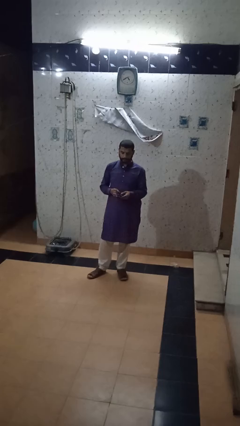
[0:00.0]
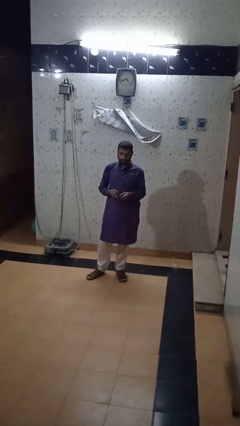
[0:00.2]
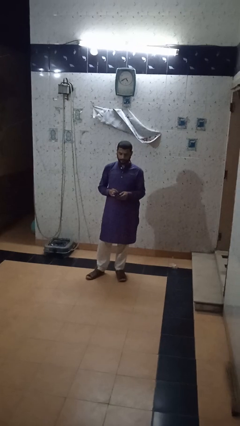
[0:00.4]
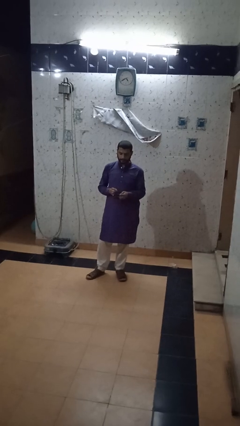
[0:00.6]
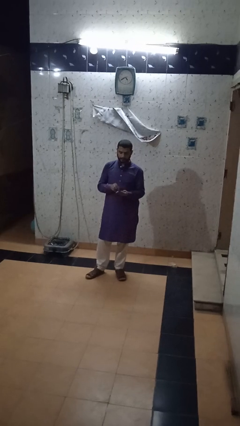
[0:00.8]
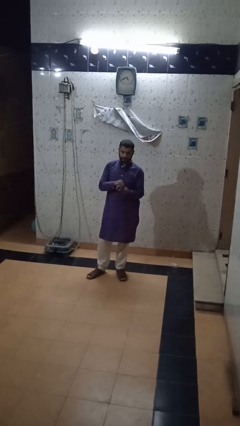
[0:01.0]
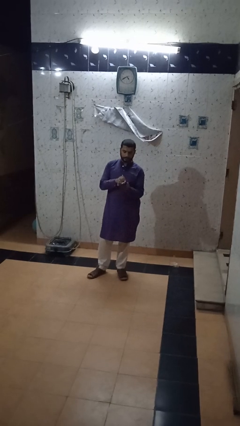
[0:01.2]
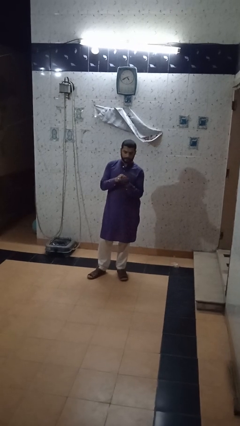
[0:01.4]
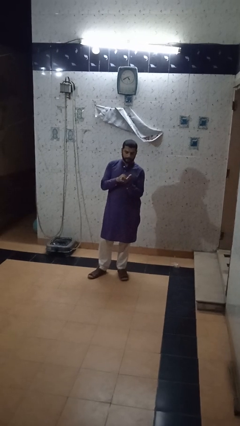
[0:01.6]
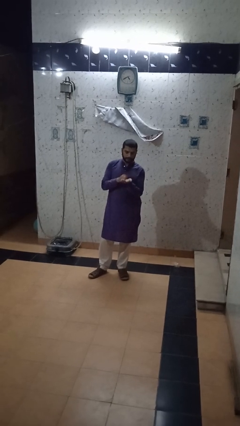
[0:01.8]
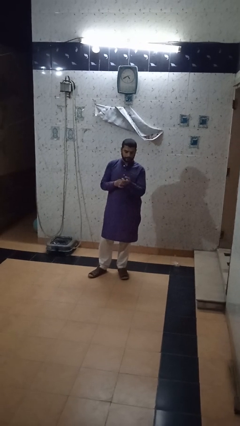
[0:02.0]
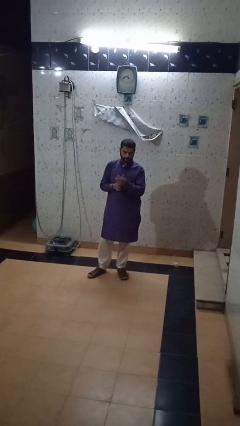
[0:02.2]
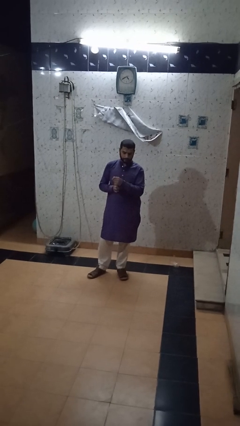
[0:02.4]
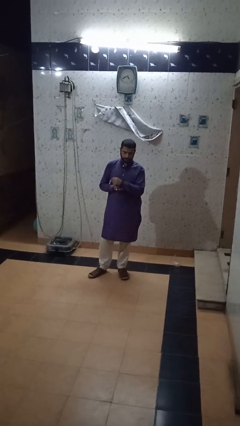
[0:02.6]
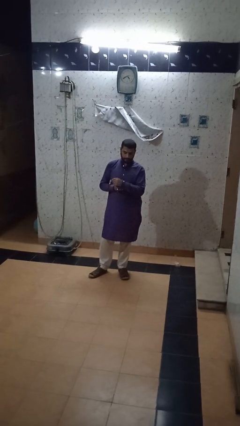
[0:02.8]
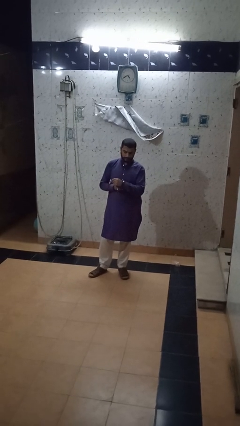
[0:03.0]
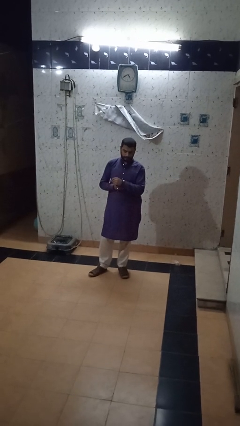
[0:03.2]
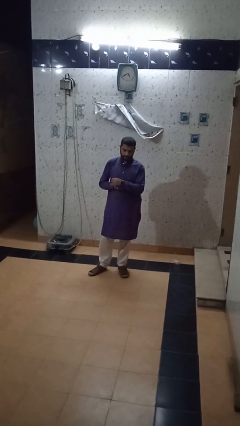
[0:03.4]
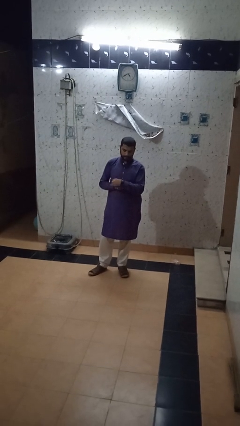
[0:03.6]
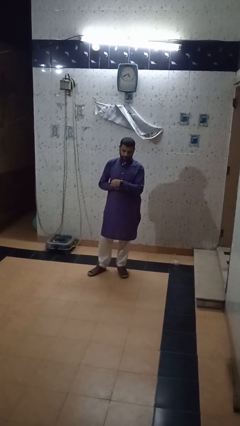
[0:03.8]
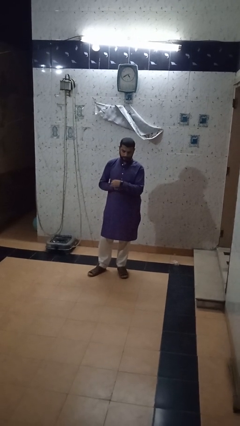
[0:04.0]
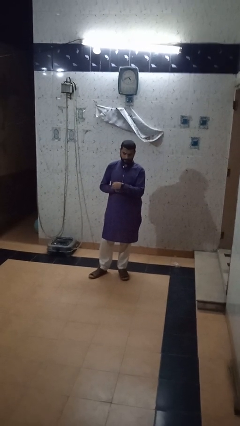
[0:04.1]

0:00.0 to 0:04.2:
person puts on wristwatch

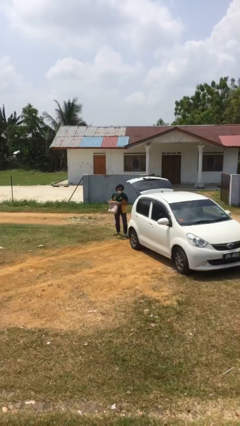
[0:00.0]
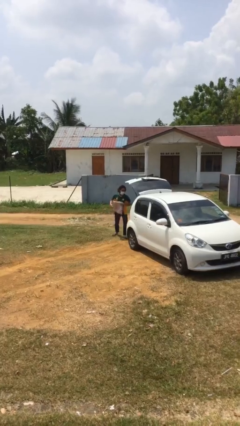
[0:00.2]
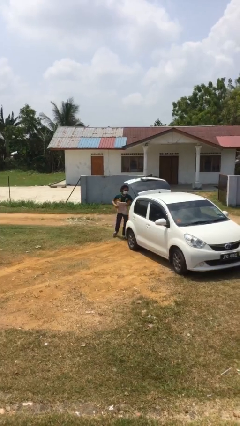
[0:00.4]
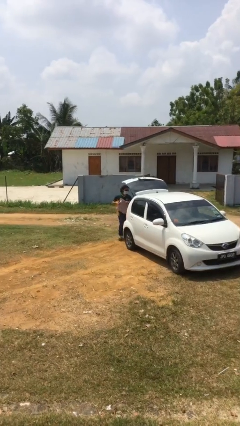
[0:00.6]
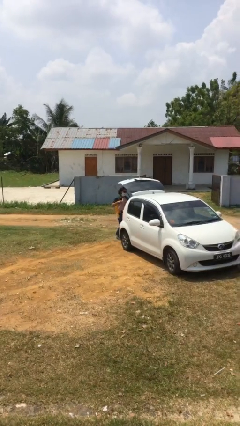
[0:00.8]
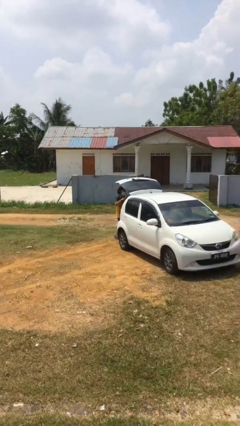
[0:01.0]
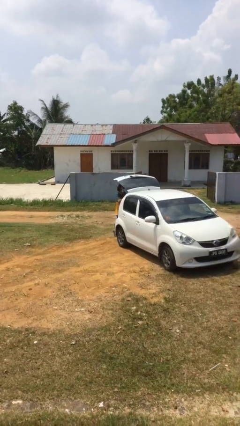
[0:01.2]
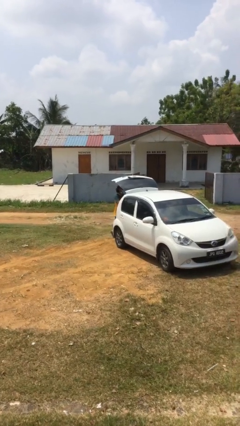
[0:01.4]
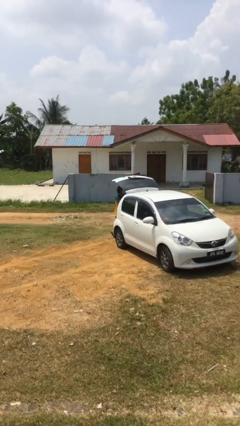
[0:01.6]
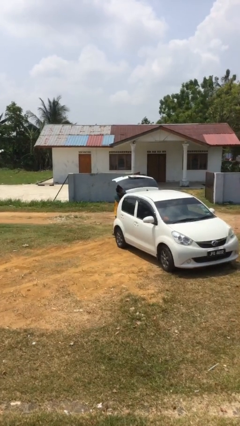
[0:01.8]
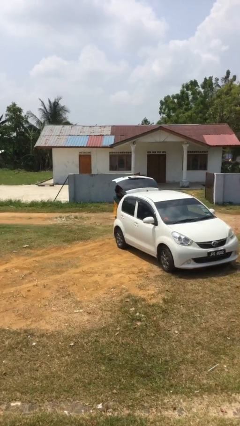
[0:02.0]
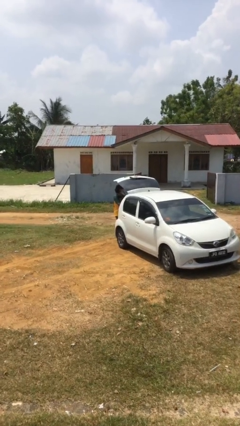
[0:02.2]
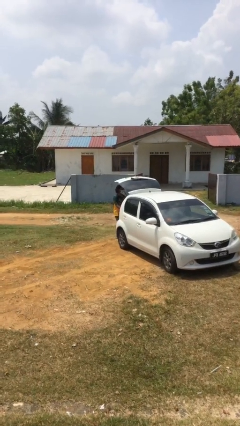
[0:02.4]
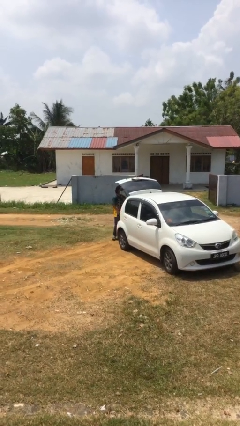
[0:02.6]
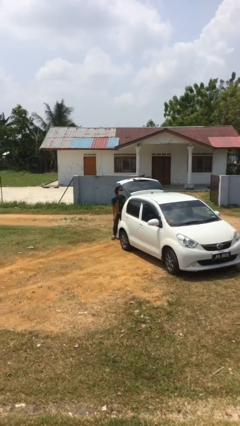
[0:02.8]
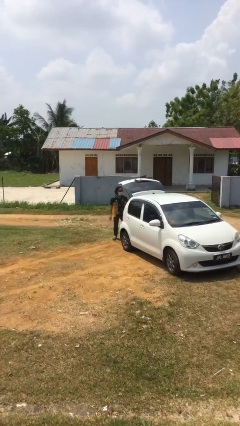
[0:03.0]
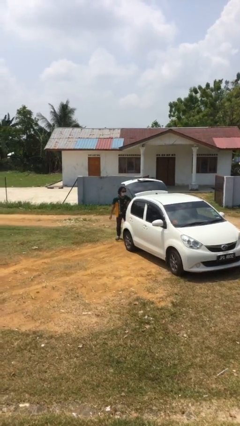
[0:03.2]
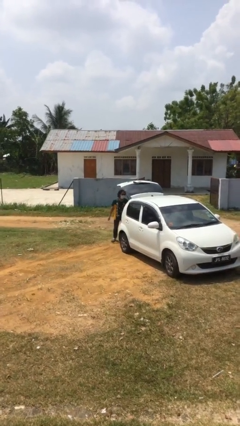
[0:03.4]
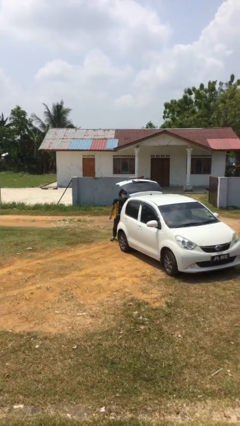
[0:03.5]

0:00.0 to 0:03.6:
person loads car

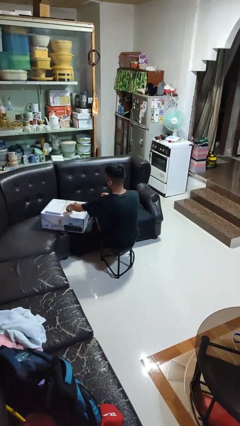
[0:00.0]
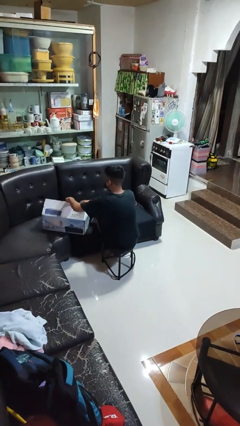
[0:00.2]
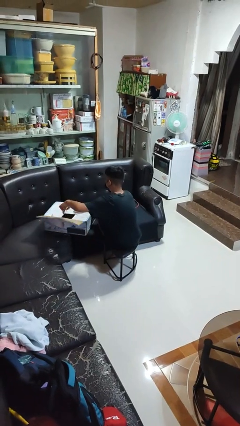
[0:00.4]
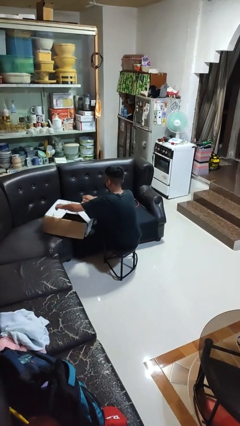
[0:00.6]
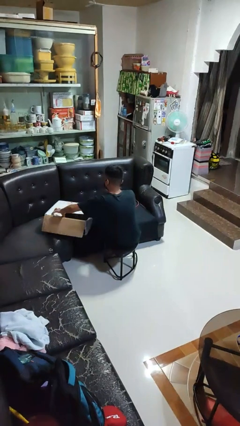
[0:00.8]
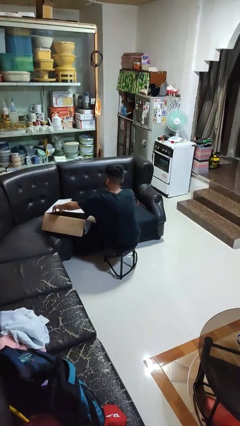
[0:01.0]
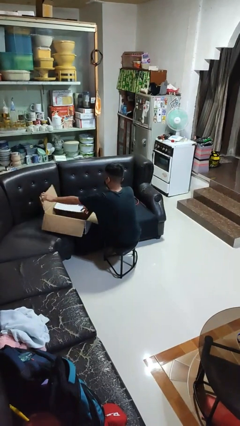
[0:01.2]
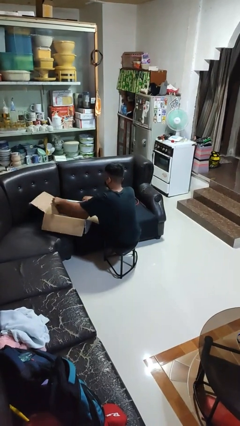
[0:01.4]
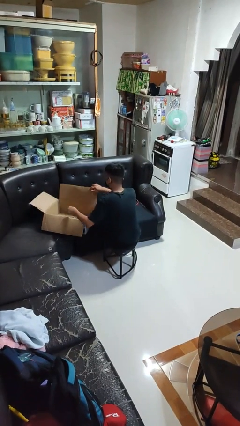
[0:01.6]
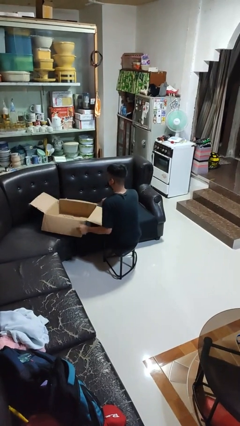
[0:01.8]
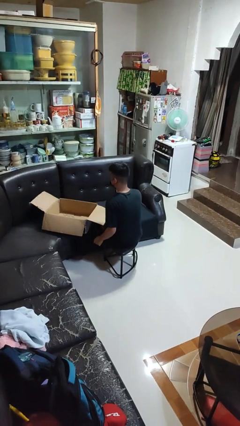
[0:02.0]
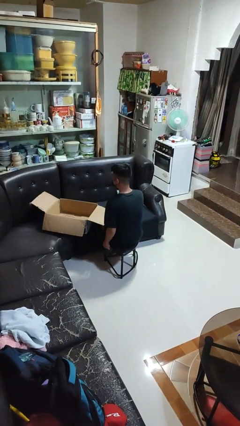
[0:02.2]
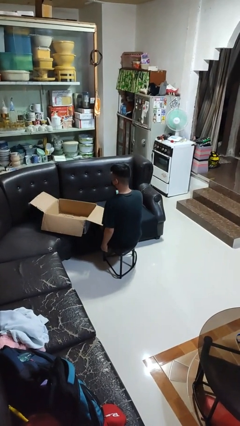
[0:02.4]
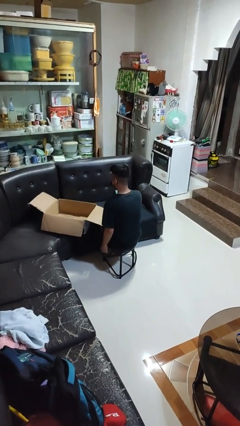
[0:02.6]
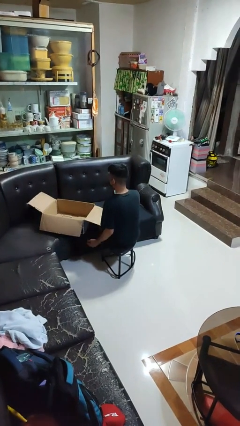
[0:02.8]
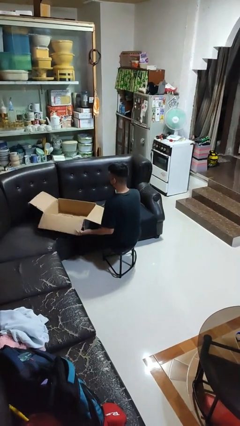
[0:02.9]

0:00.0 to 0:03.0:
person opens box

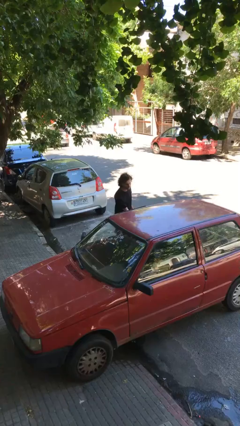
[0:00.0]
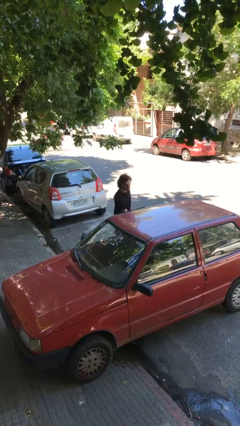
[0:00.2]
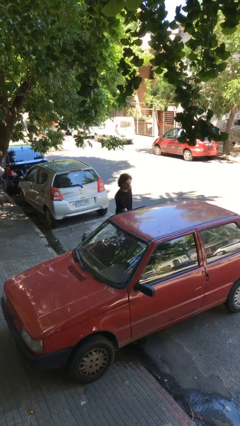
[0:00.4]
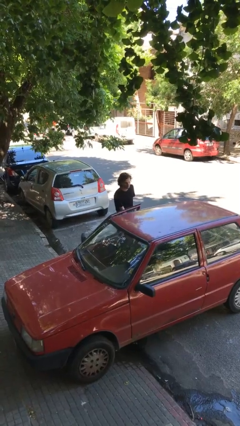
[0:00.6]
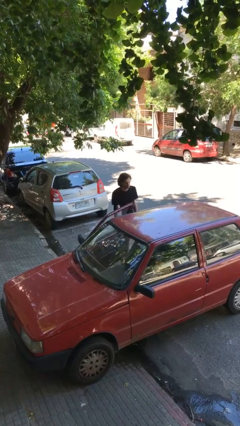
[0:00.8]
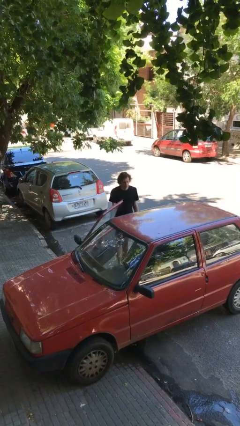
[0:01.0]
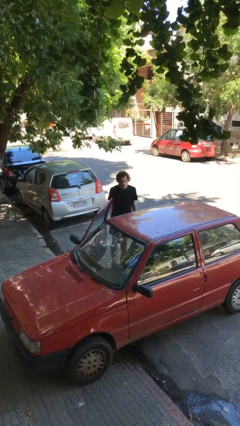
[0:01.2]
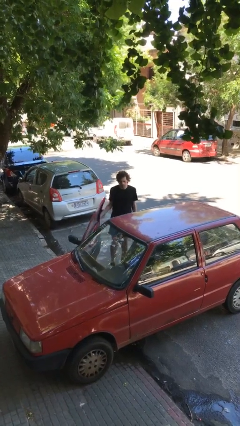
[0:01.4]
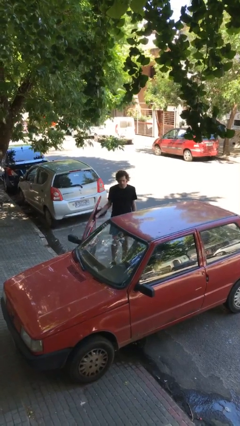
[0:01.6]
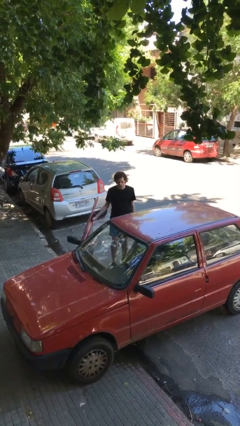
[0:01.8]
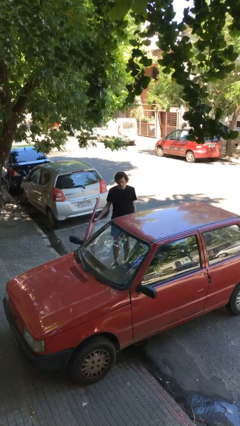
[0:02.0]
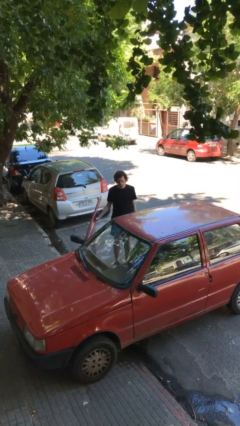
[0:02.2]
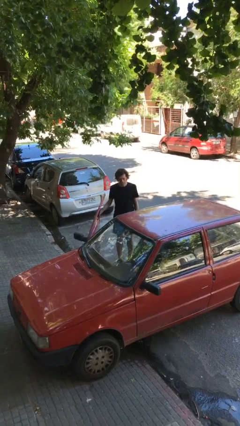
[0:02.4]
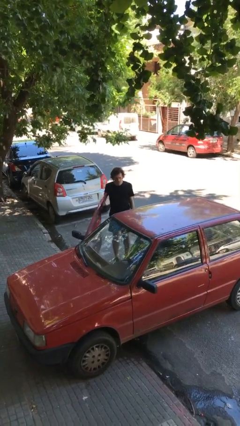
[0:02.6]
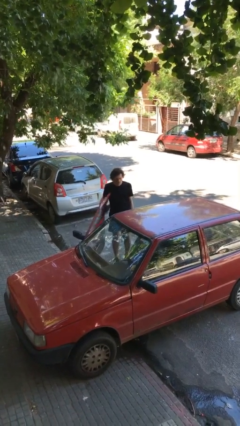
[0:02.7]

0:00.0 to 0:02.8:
person opens car door

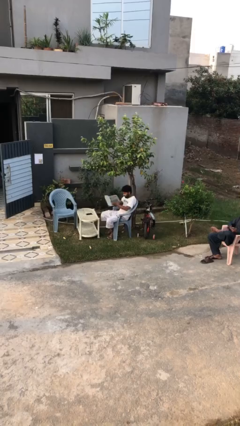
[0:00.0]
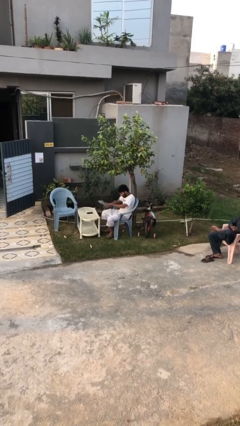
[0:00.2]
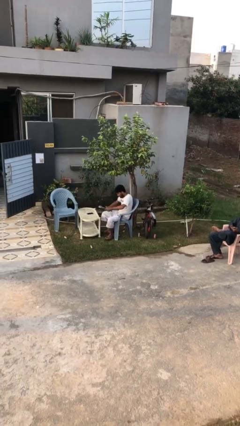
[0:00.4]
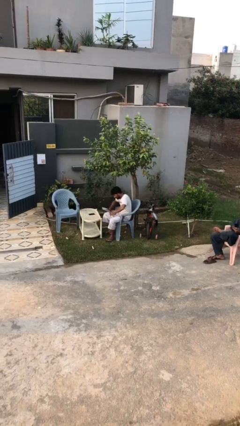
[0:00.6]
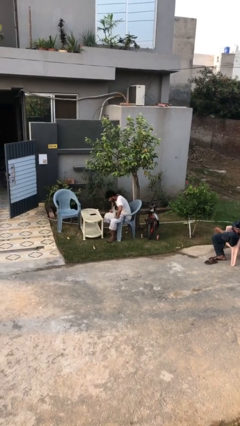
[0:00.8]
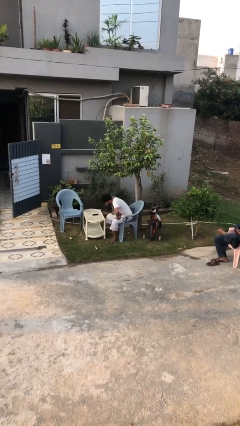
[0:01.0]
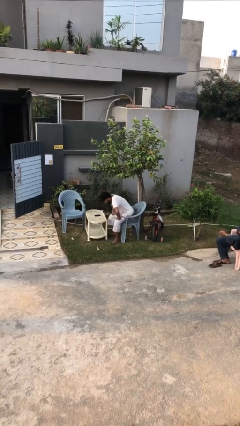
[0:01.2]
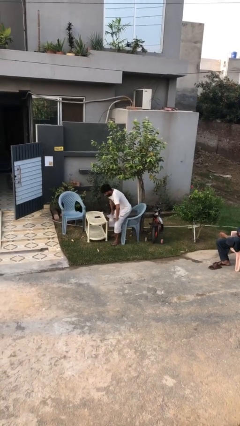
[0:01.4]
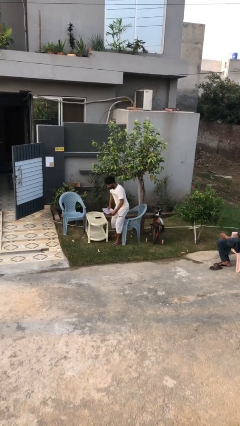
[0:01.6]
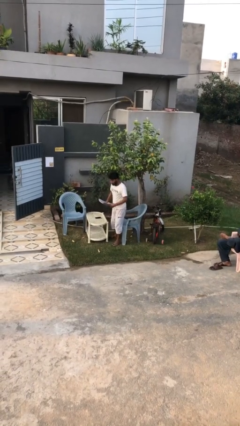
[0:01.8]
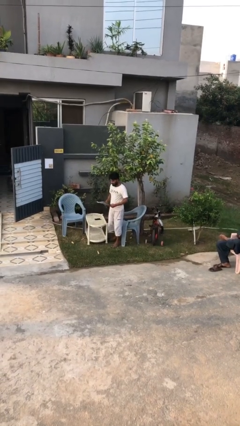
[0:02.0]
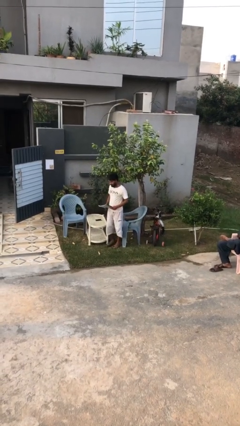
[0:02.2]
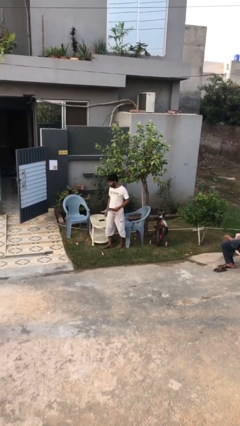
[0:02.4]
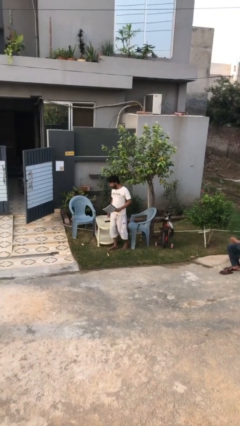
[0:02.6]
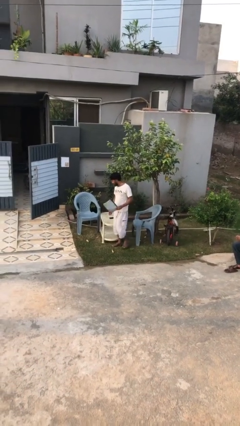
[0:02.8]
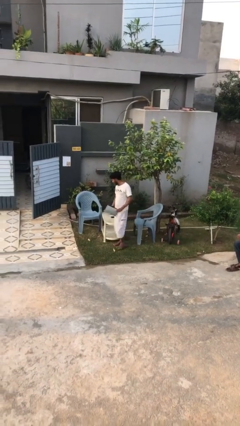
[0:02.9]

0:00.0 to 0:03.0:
person stands up

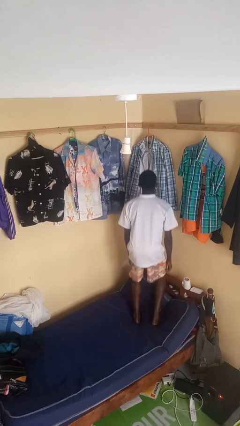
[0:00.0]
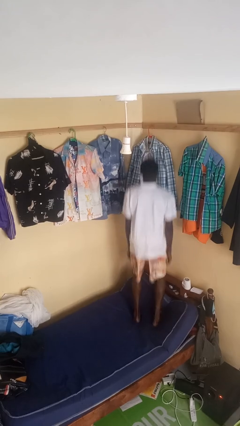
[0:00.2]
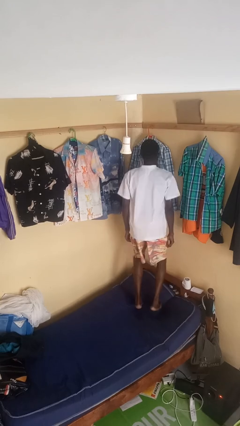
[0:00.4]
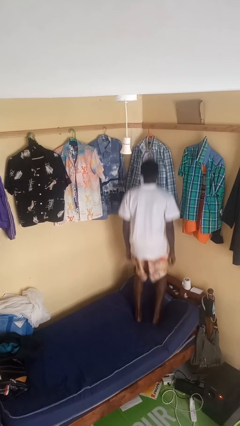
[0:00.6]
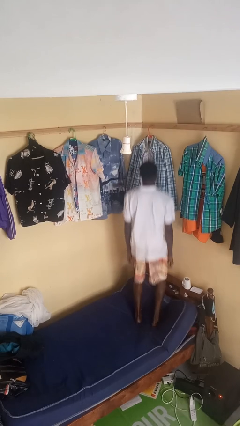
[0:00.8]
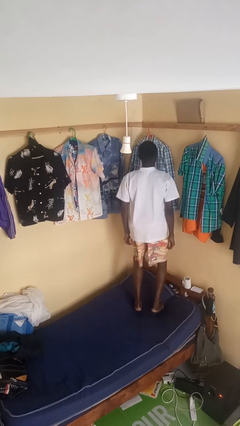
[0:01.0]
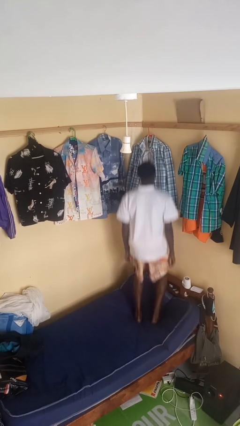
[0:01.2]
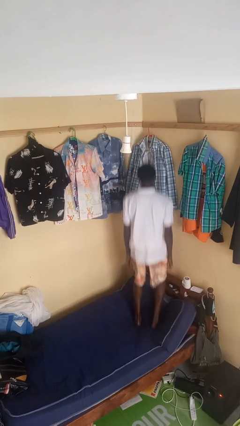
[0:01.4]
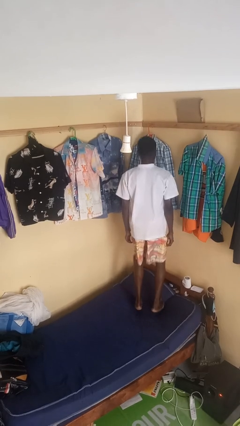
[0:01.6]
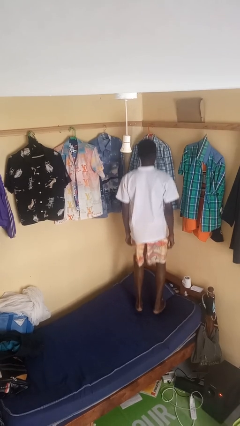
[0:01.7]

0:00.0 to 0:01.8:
person jumps on bed
